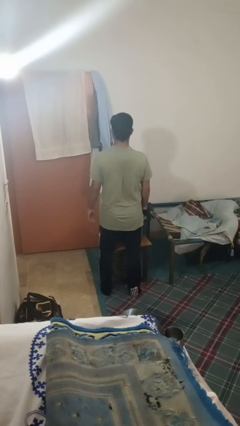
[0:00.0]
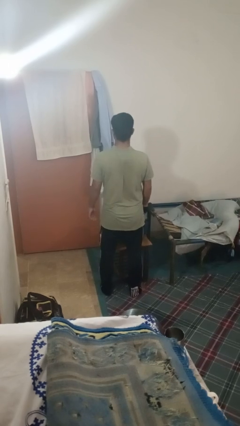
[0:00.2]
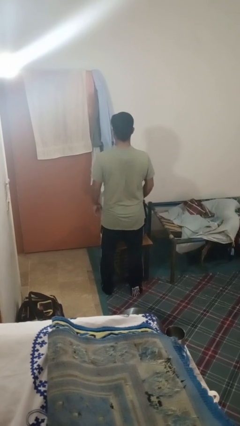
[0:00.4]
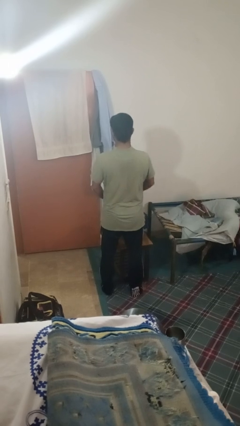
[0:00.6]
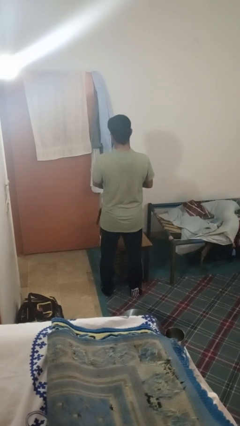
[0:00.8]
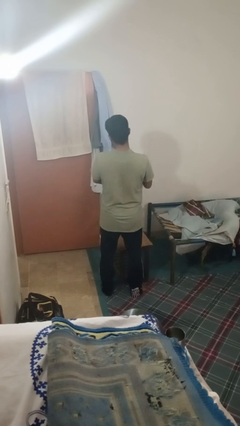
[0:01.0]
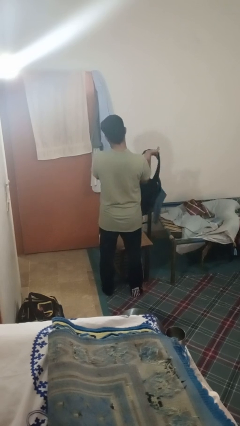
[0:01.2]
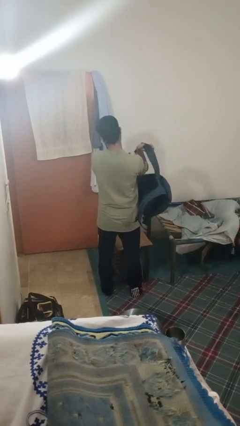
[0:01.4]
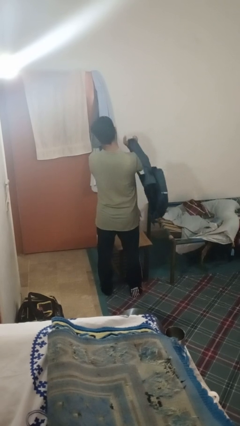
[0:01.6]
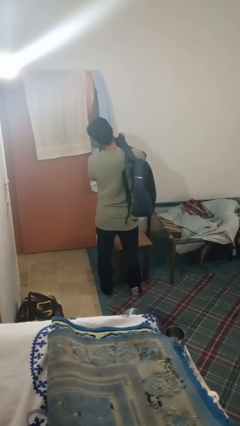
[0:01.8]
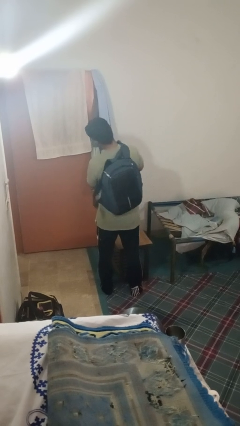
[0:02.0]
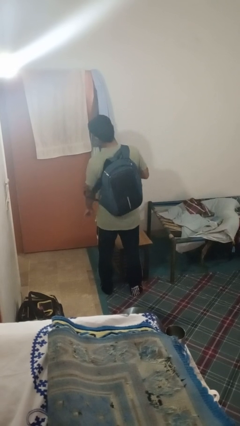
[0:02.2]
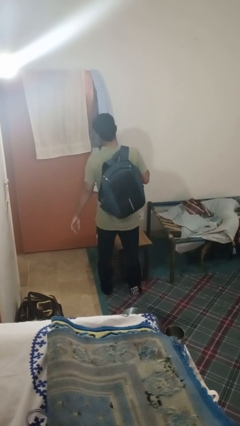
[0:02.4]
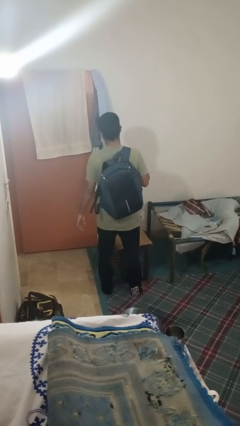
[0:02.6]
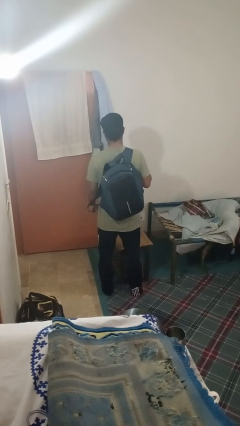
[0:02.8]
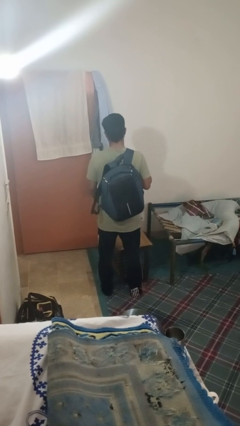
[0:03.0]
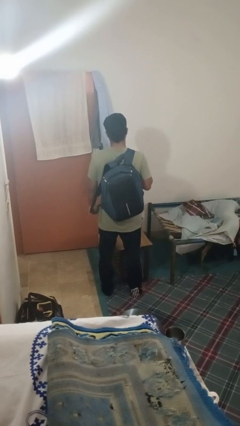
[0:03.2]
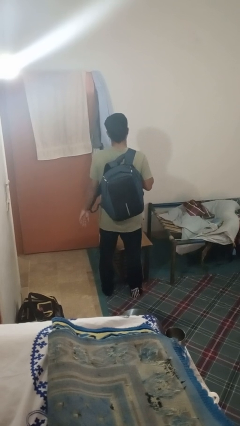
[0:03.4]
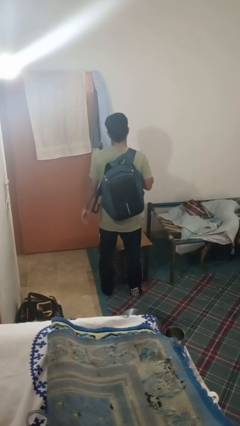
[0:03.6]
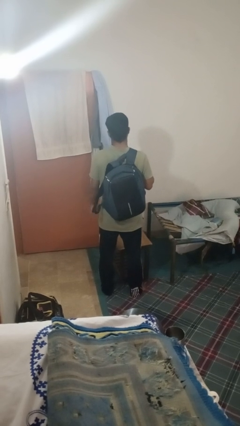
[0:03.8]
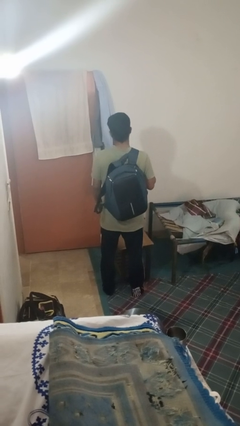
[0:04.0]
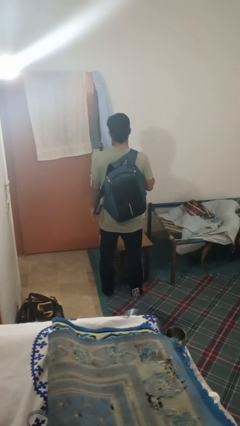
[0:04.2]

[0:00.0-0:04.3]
person puts on backpack

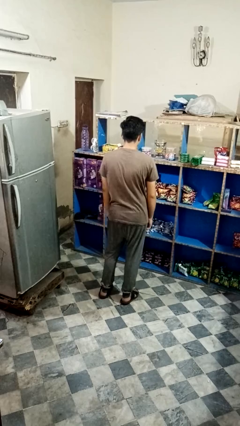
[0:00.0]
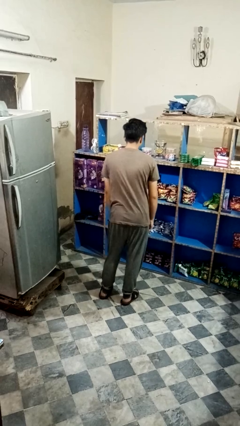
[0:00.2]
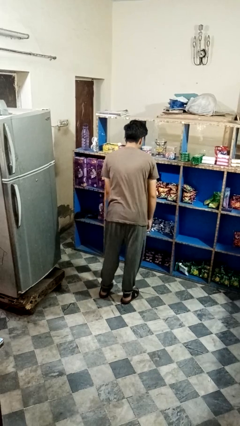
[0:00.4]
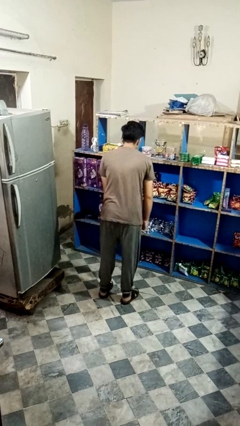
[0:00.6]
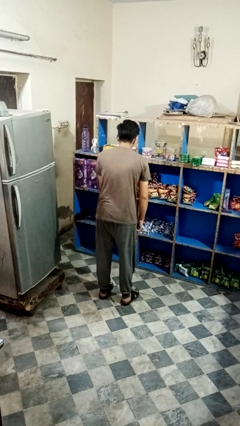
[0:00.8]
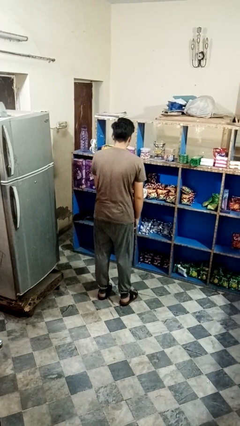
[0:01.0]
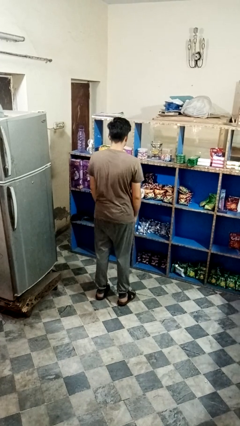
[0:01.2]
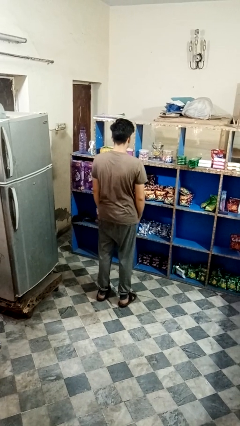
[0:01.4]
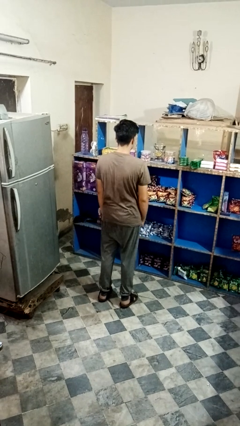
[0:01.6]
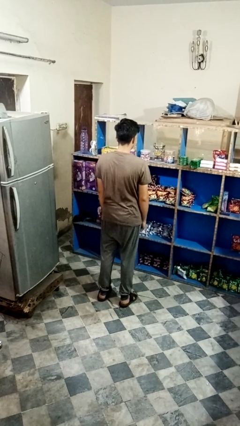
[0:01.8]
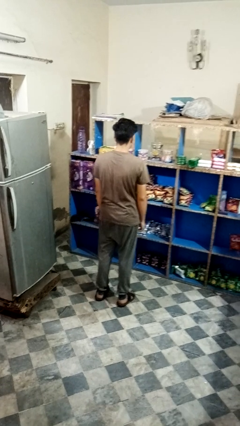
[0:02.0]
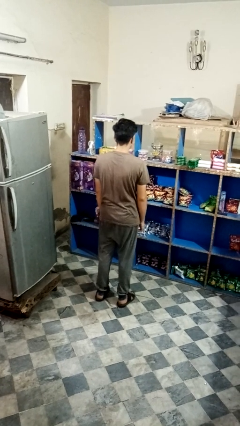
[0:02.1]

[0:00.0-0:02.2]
person wiggles hips

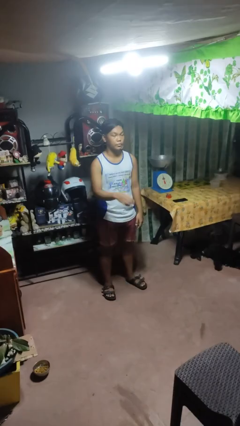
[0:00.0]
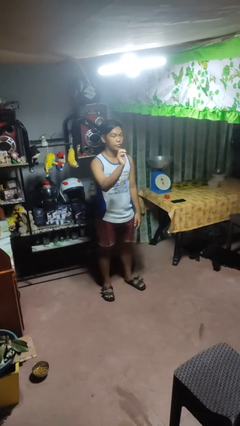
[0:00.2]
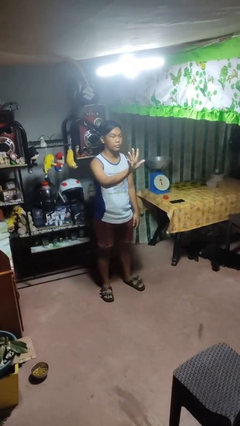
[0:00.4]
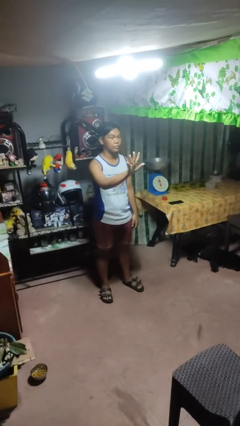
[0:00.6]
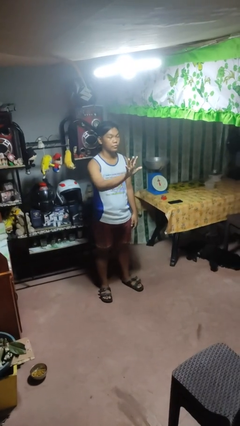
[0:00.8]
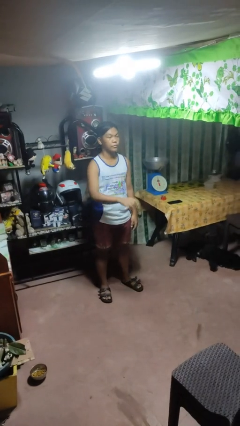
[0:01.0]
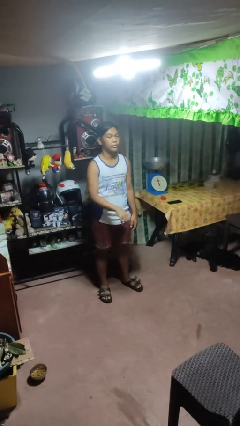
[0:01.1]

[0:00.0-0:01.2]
person gestures number five

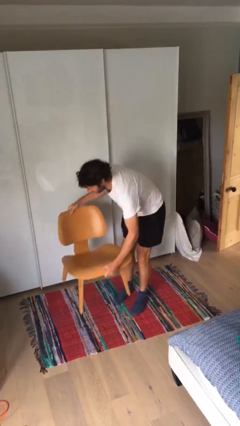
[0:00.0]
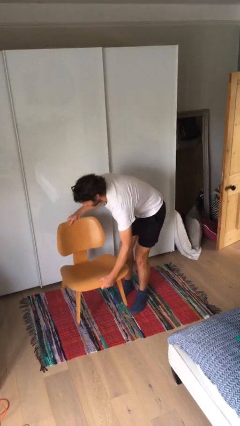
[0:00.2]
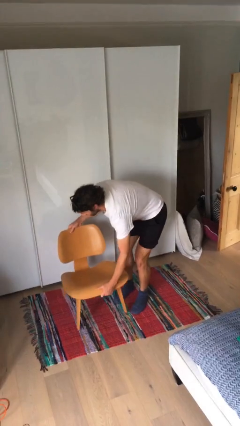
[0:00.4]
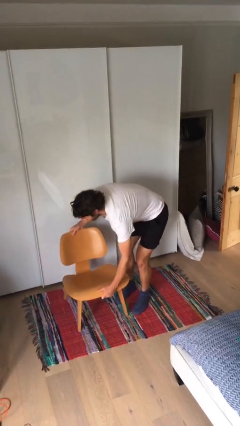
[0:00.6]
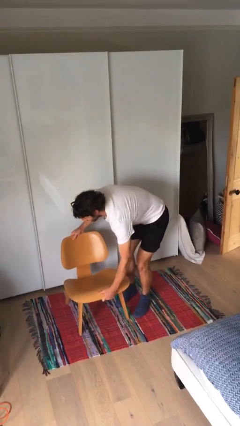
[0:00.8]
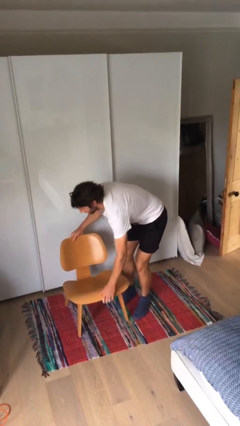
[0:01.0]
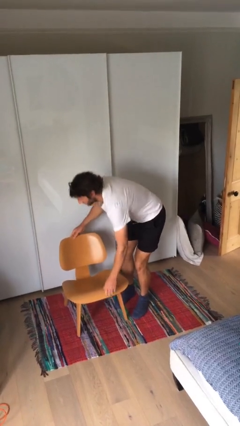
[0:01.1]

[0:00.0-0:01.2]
person puts down object on floor

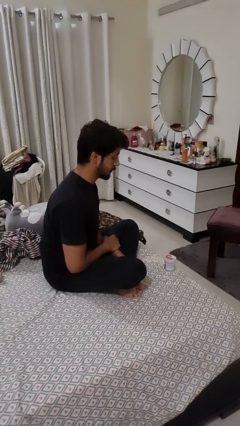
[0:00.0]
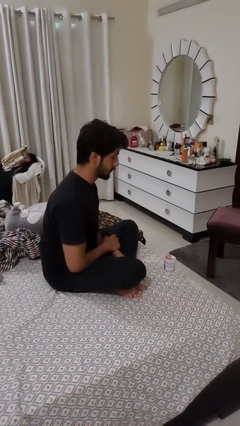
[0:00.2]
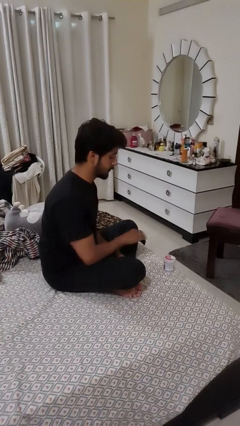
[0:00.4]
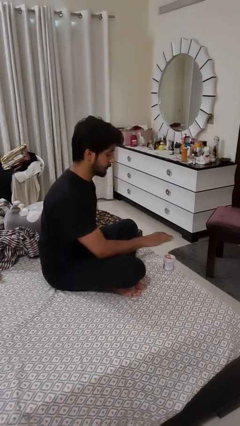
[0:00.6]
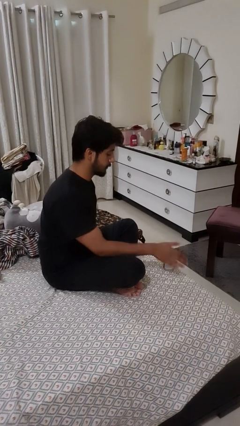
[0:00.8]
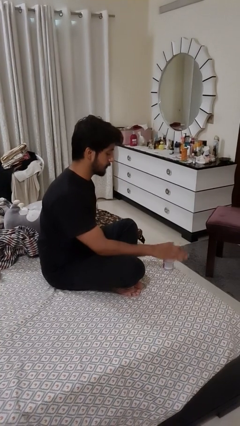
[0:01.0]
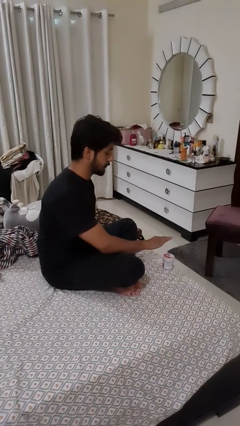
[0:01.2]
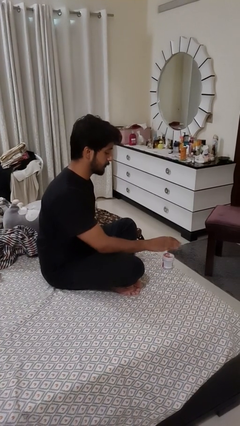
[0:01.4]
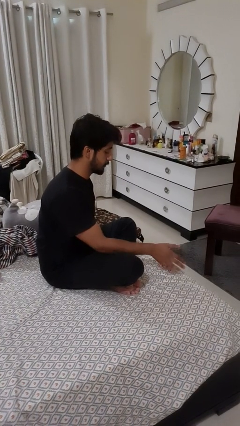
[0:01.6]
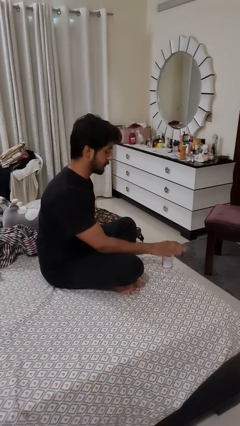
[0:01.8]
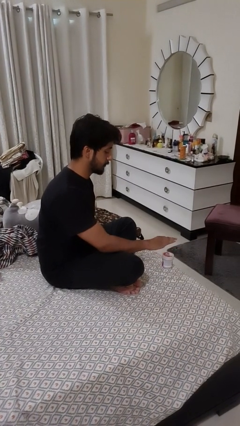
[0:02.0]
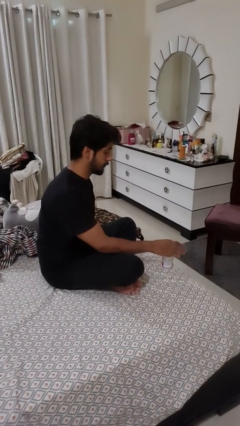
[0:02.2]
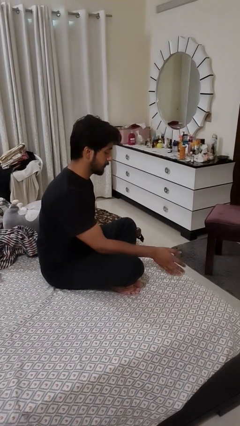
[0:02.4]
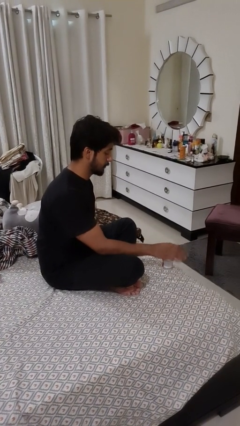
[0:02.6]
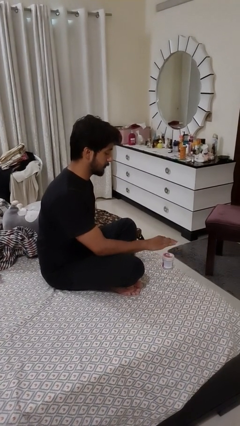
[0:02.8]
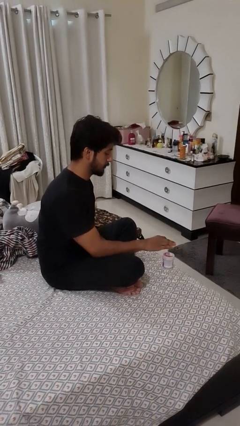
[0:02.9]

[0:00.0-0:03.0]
person waves hand over object

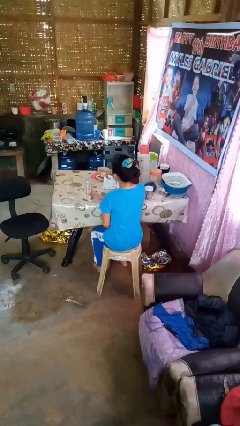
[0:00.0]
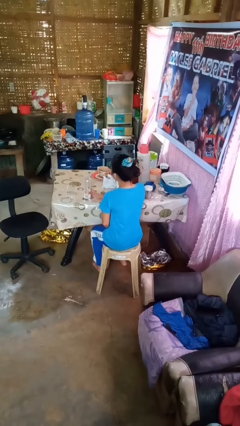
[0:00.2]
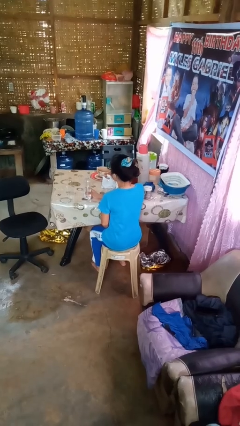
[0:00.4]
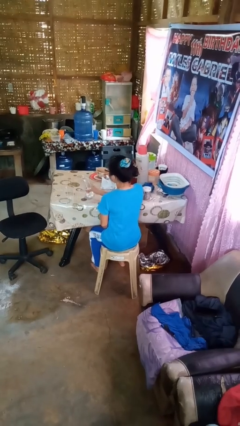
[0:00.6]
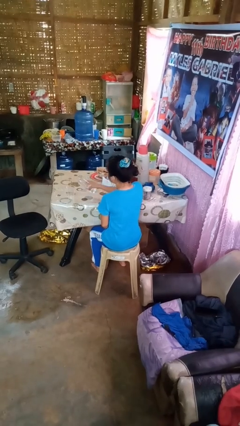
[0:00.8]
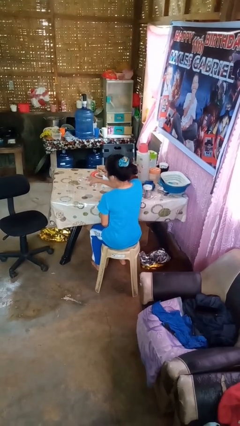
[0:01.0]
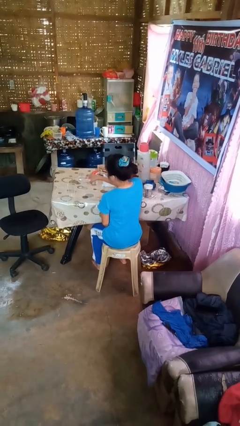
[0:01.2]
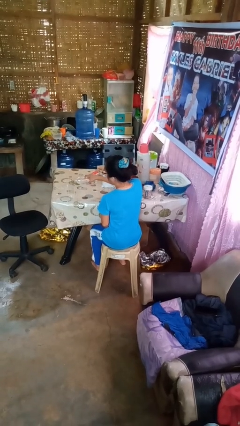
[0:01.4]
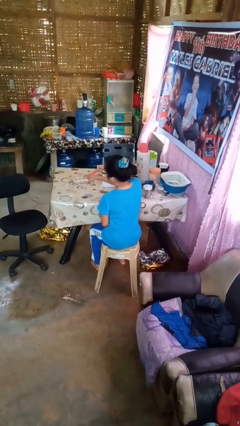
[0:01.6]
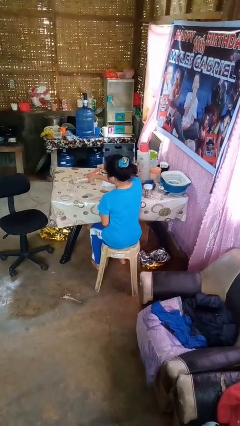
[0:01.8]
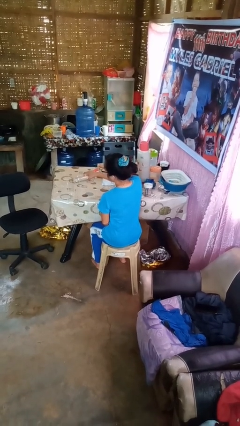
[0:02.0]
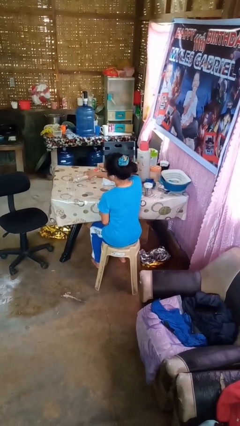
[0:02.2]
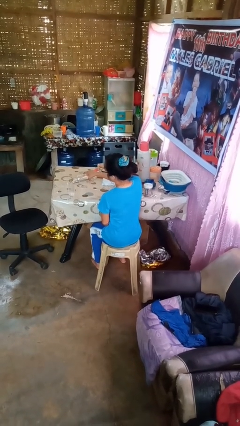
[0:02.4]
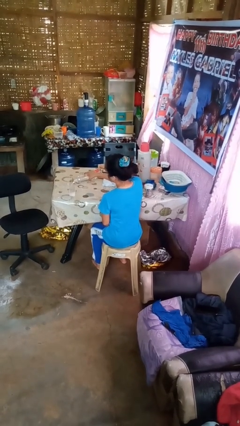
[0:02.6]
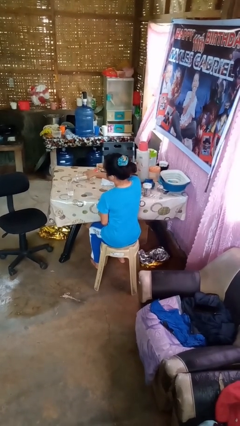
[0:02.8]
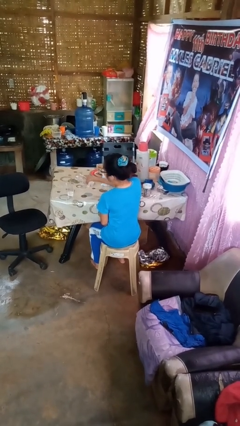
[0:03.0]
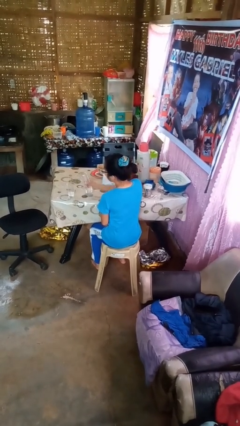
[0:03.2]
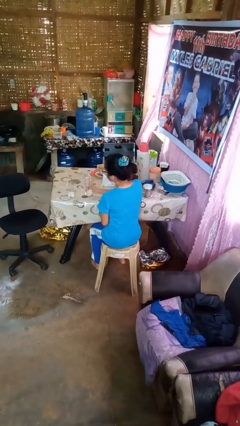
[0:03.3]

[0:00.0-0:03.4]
person pours liquid into cup

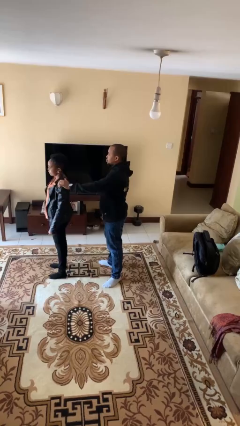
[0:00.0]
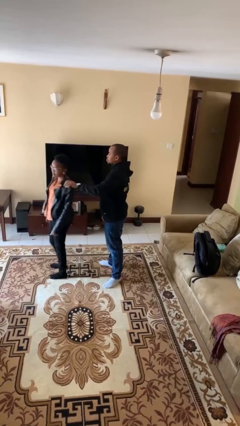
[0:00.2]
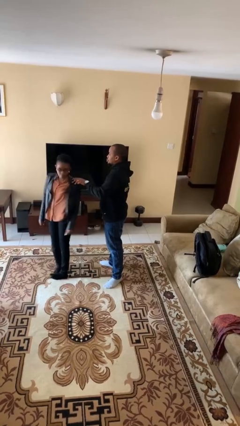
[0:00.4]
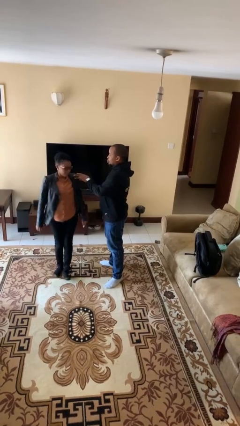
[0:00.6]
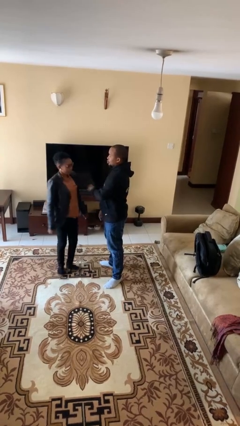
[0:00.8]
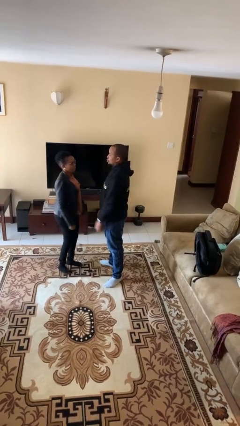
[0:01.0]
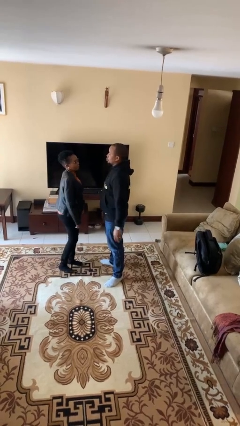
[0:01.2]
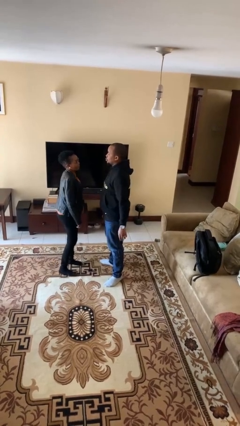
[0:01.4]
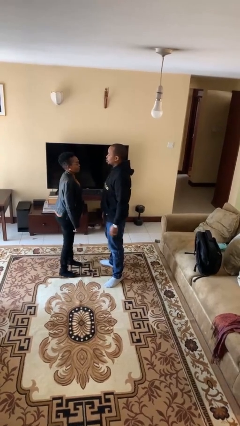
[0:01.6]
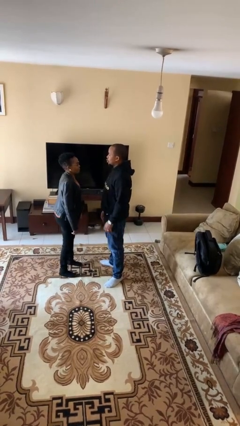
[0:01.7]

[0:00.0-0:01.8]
person spins person around
